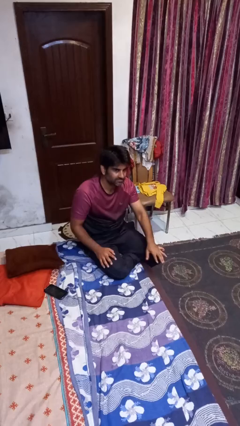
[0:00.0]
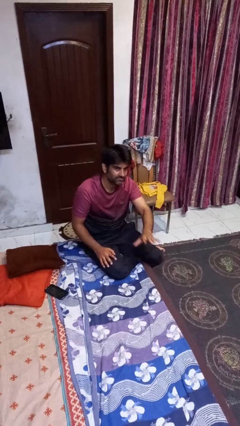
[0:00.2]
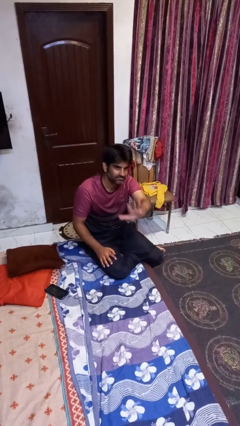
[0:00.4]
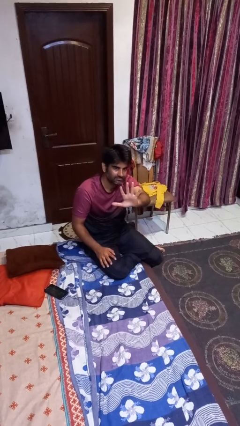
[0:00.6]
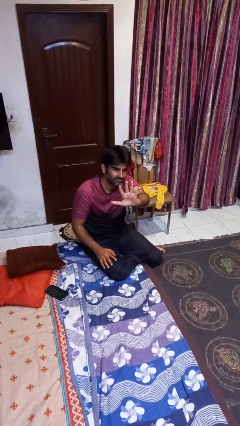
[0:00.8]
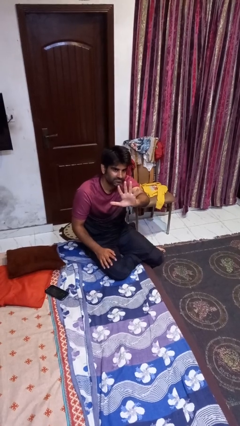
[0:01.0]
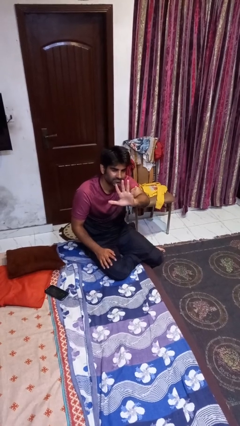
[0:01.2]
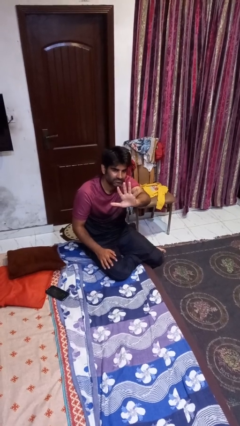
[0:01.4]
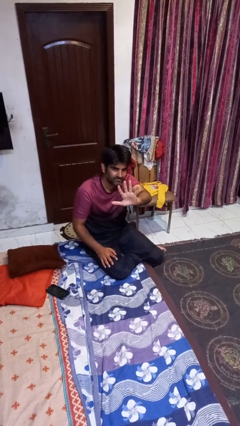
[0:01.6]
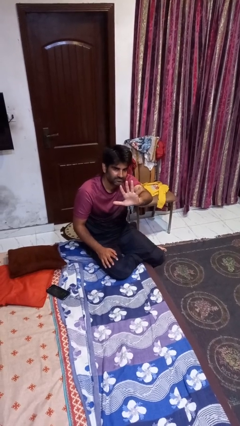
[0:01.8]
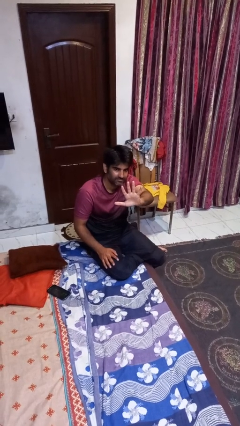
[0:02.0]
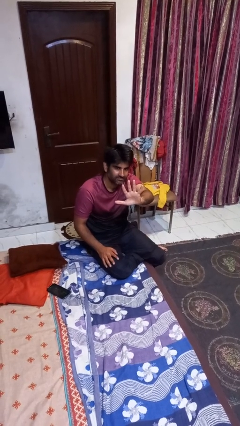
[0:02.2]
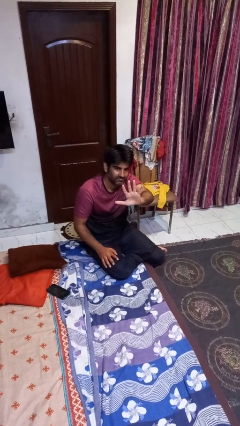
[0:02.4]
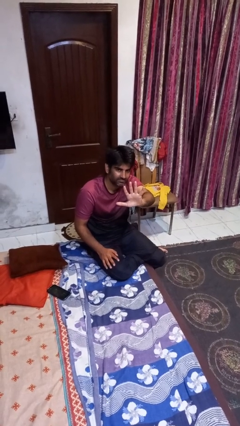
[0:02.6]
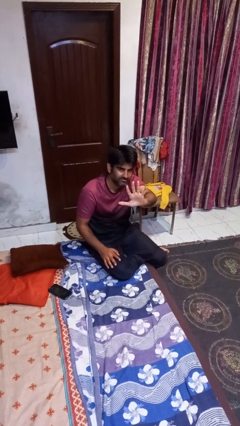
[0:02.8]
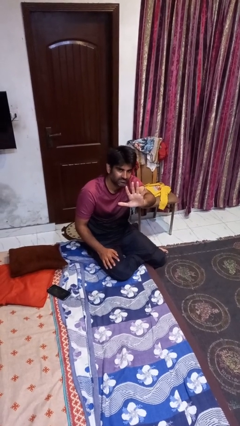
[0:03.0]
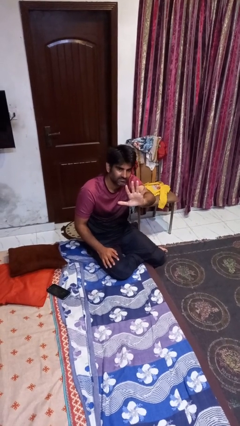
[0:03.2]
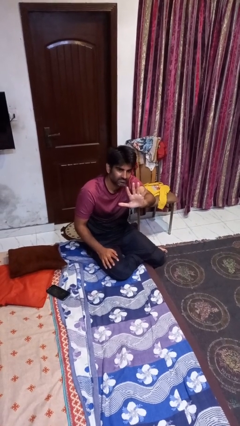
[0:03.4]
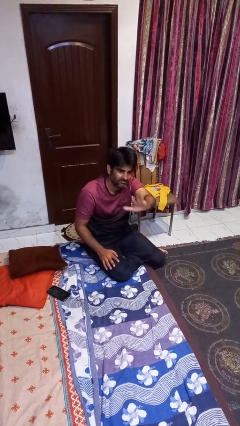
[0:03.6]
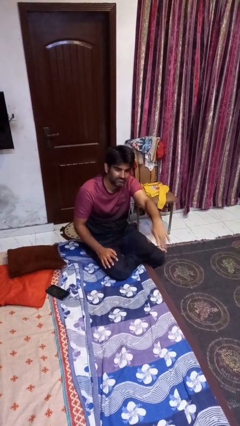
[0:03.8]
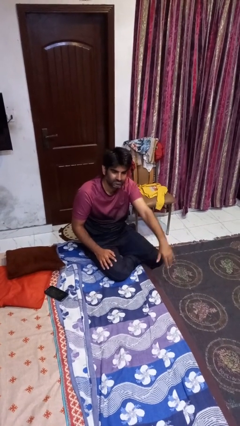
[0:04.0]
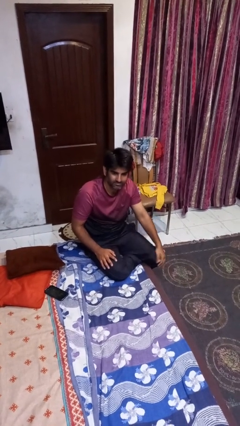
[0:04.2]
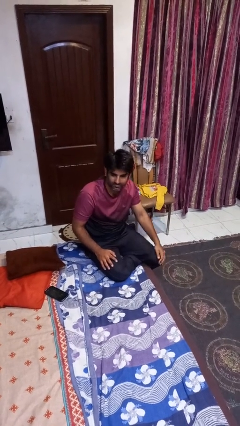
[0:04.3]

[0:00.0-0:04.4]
person gestures number five

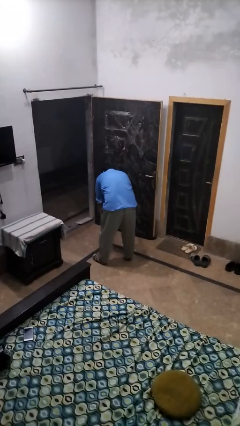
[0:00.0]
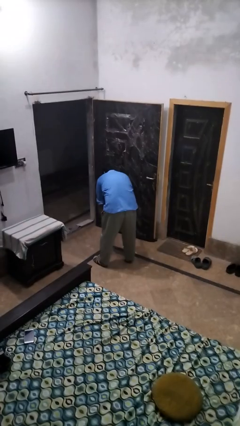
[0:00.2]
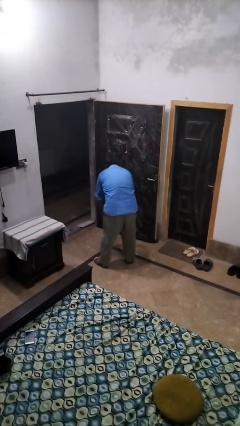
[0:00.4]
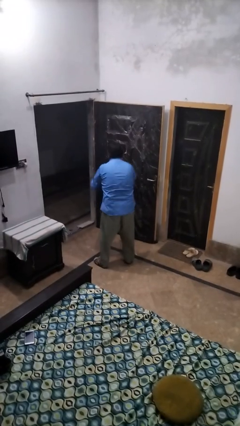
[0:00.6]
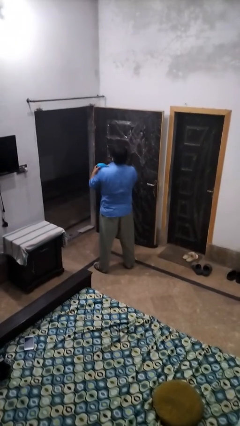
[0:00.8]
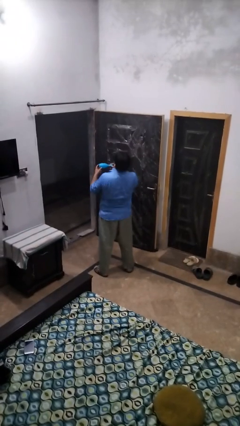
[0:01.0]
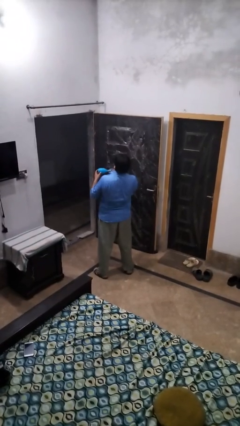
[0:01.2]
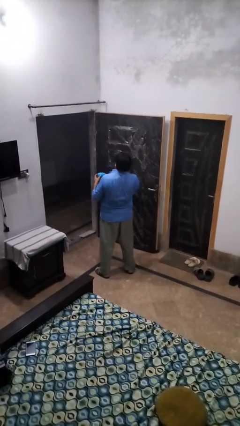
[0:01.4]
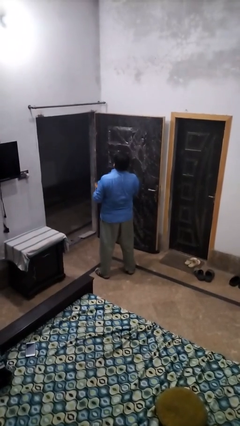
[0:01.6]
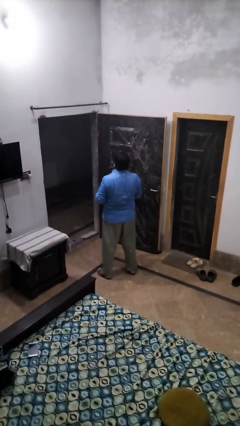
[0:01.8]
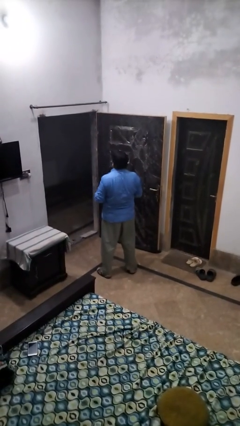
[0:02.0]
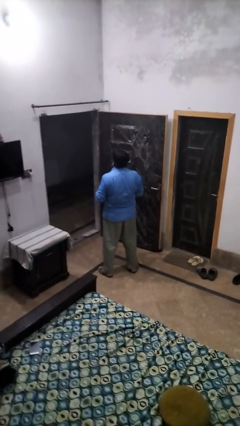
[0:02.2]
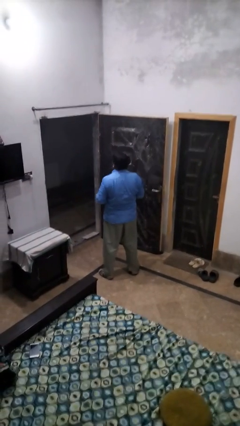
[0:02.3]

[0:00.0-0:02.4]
person picks up object from floor

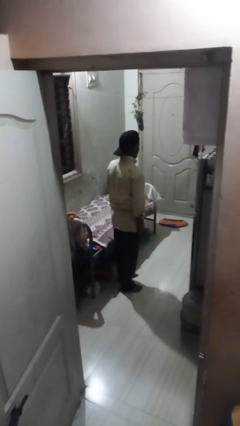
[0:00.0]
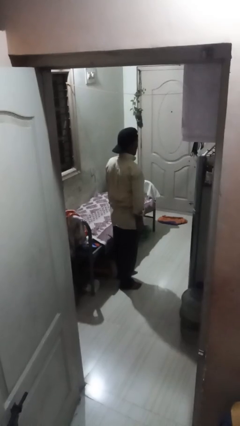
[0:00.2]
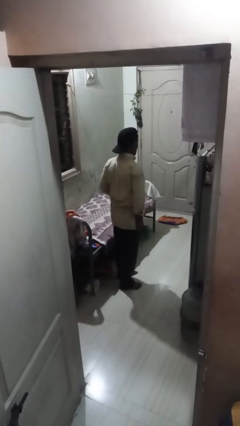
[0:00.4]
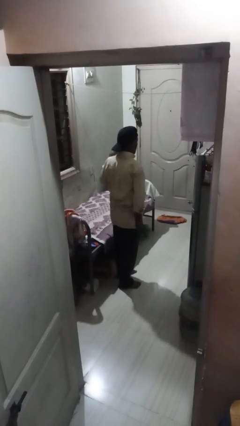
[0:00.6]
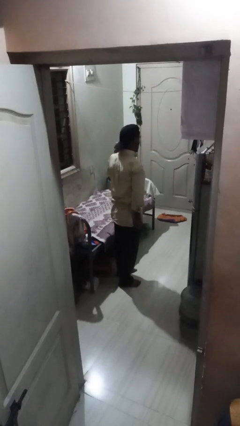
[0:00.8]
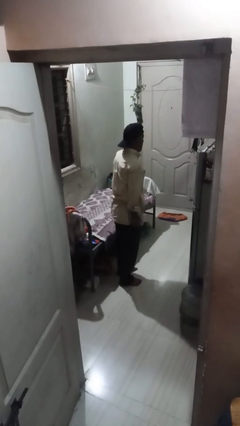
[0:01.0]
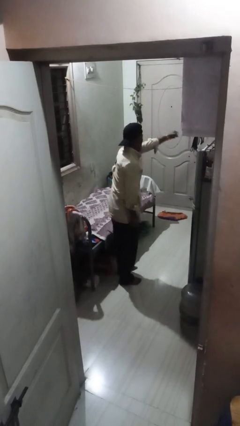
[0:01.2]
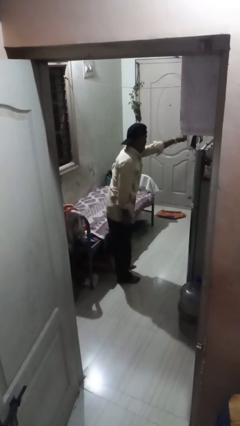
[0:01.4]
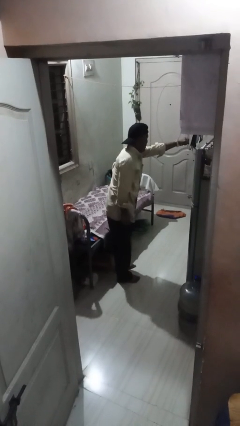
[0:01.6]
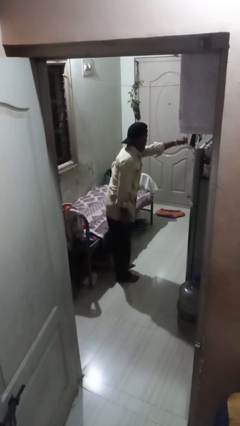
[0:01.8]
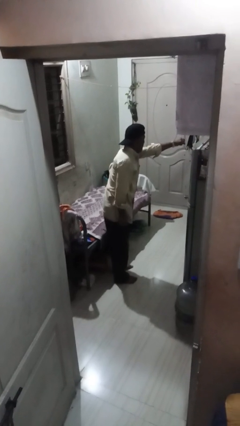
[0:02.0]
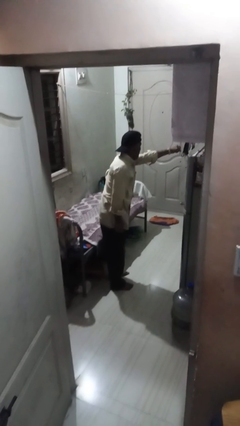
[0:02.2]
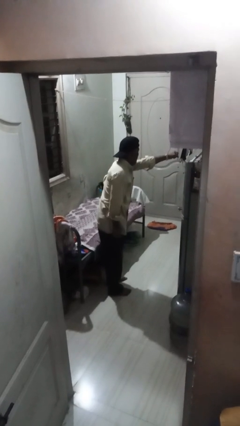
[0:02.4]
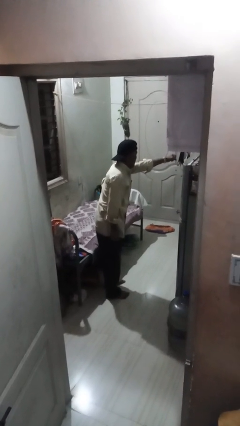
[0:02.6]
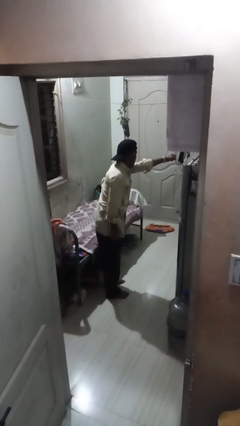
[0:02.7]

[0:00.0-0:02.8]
person punches

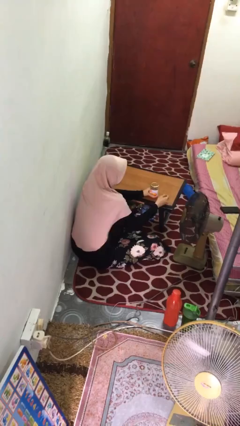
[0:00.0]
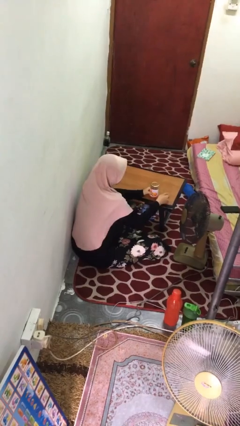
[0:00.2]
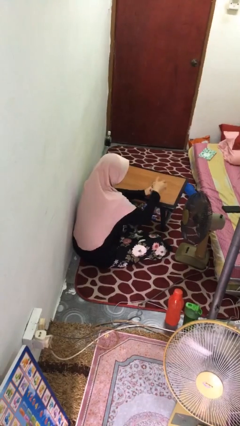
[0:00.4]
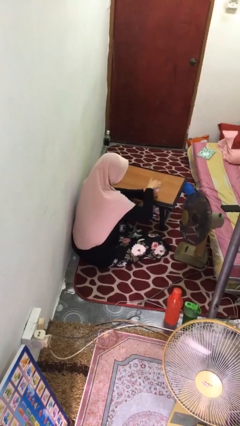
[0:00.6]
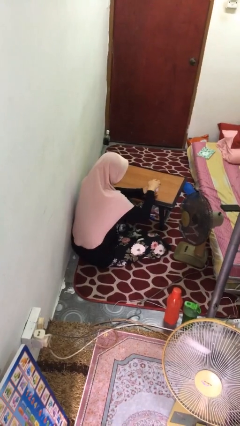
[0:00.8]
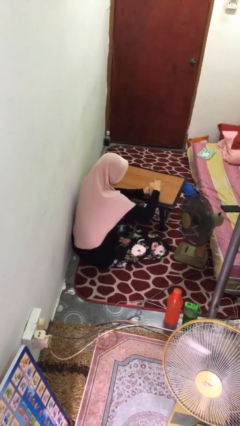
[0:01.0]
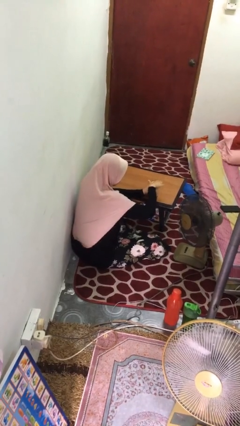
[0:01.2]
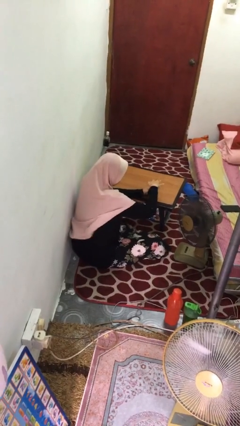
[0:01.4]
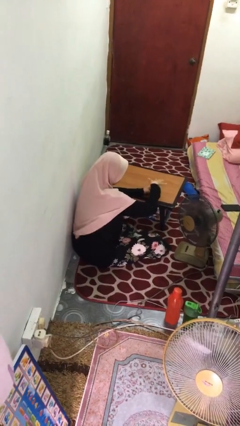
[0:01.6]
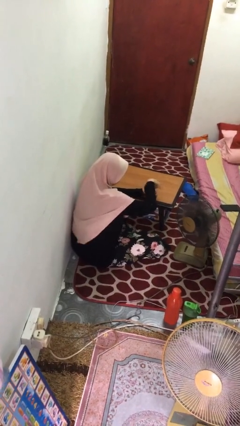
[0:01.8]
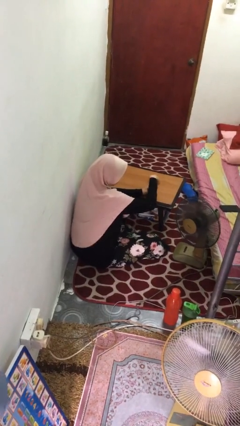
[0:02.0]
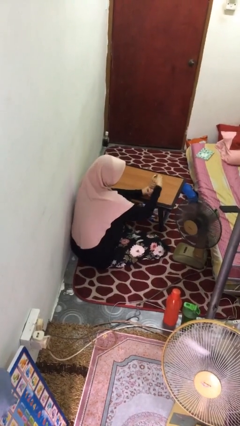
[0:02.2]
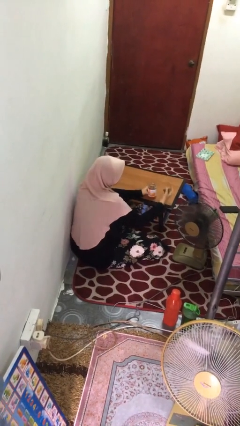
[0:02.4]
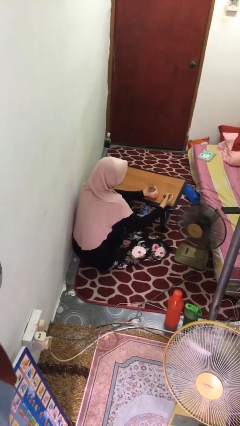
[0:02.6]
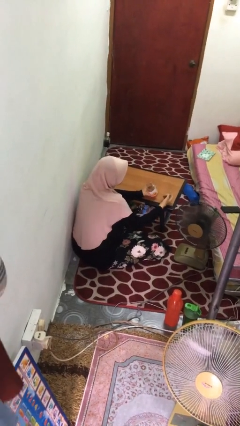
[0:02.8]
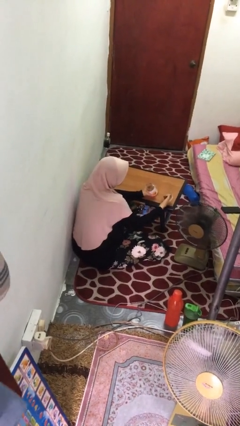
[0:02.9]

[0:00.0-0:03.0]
person opens jar

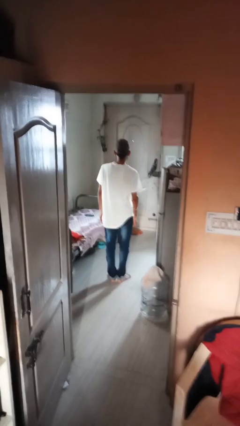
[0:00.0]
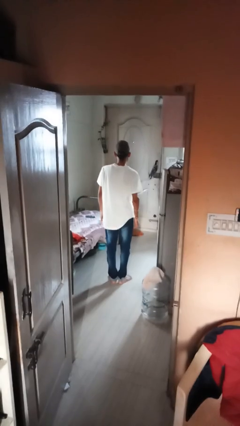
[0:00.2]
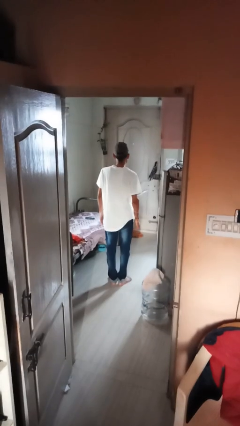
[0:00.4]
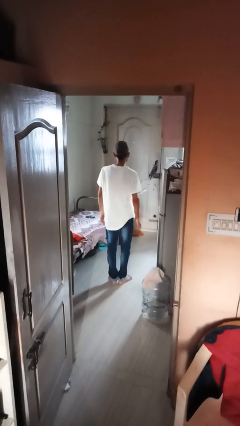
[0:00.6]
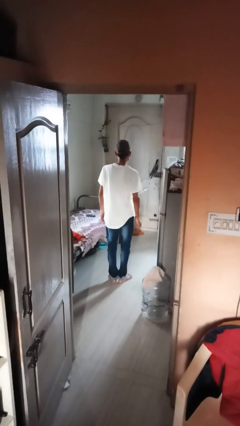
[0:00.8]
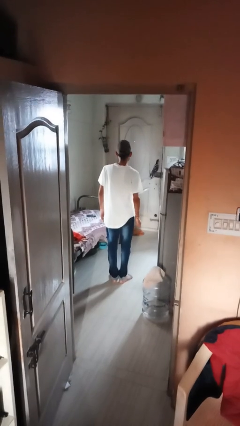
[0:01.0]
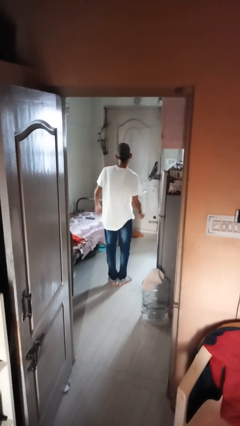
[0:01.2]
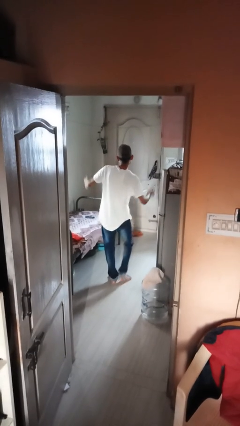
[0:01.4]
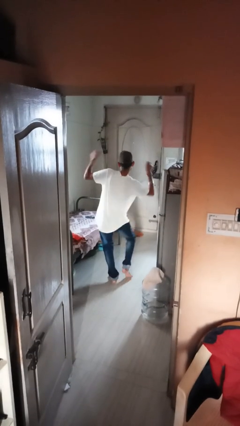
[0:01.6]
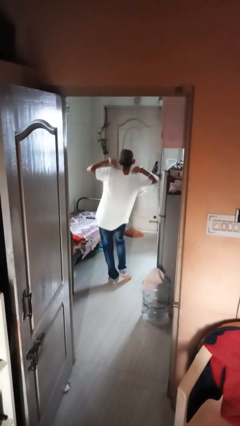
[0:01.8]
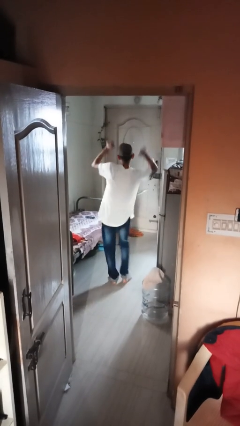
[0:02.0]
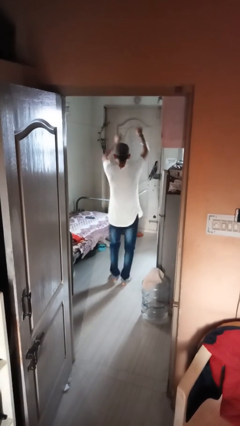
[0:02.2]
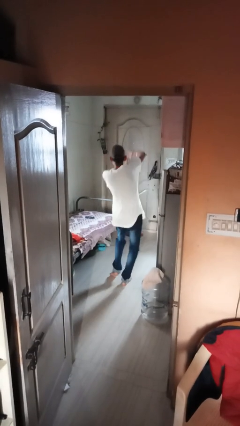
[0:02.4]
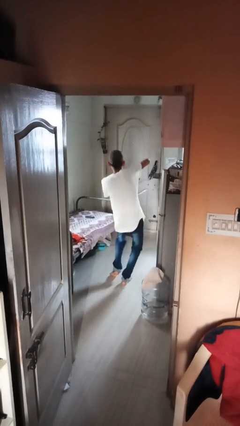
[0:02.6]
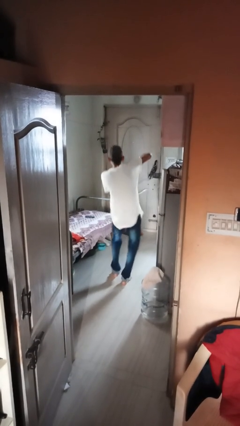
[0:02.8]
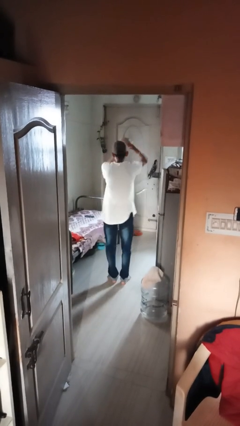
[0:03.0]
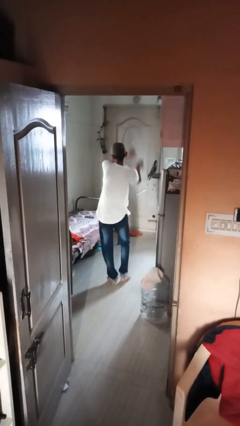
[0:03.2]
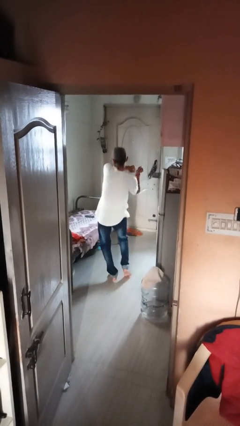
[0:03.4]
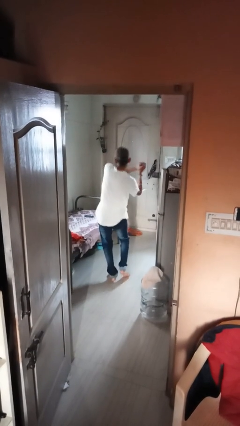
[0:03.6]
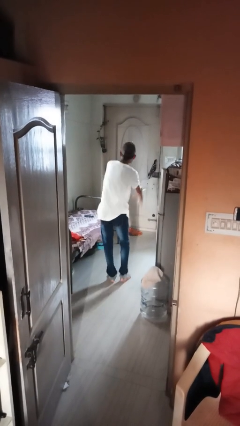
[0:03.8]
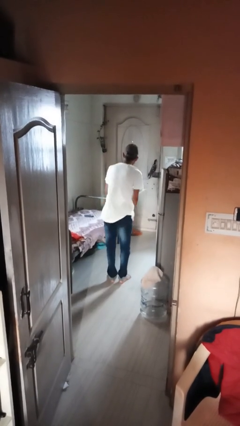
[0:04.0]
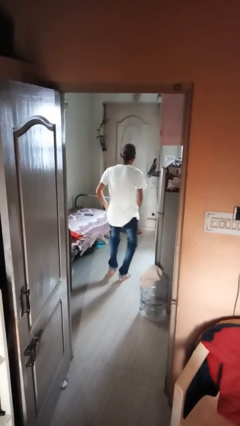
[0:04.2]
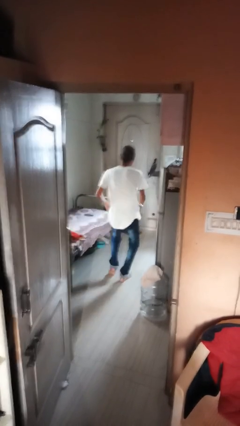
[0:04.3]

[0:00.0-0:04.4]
person dances in place

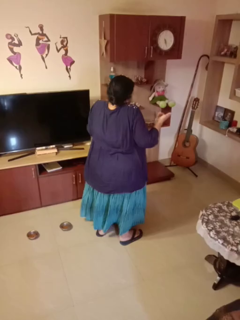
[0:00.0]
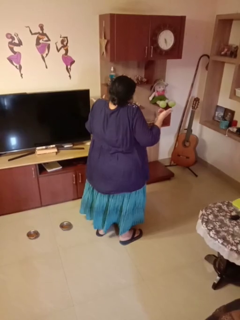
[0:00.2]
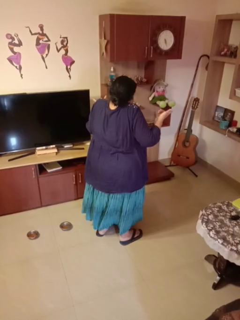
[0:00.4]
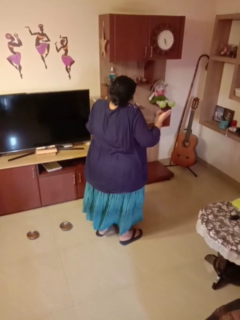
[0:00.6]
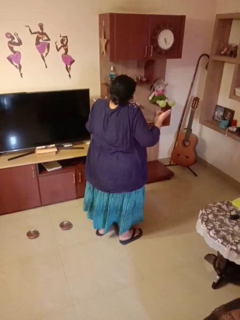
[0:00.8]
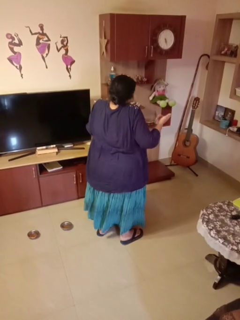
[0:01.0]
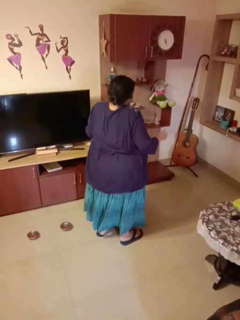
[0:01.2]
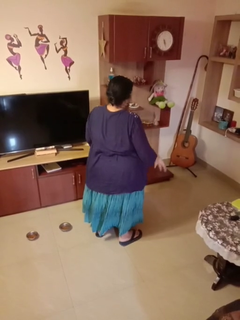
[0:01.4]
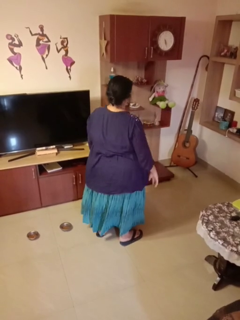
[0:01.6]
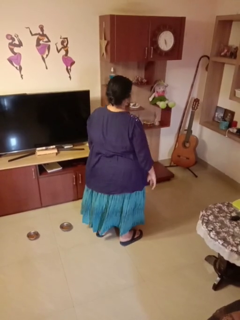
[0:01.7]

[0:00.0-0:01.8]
person shrugs
